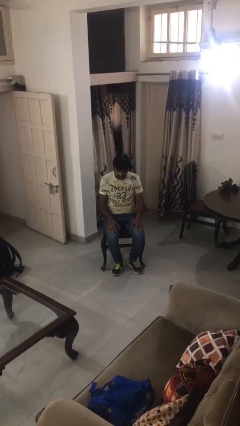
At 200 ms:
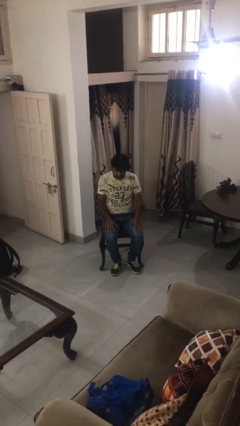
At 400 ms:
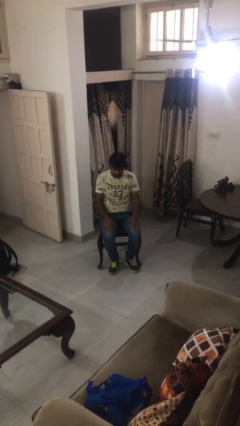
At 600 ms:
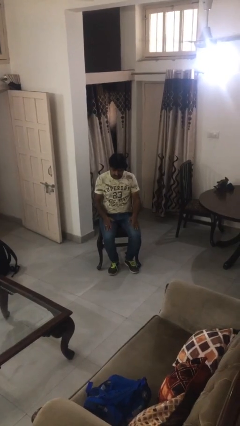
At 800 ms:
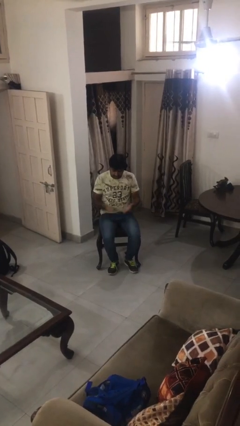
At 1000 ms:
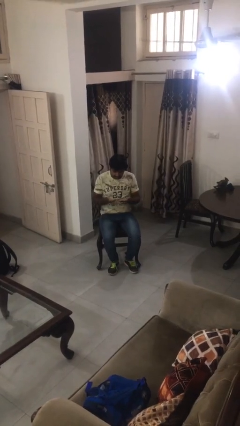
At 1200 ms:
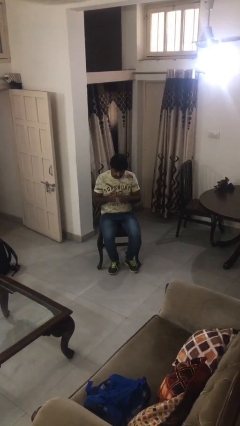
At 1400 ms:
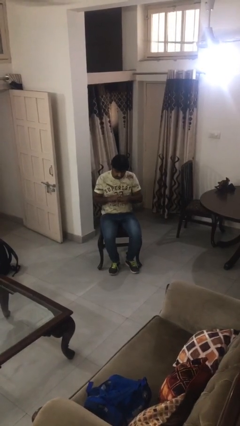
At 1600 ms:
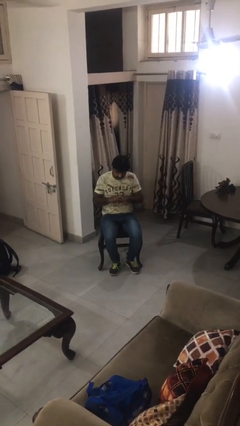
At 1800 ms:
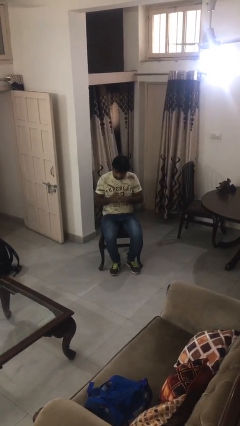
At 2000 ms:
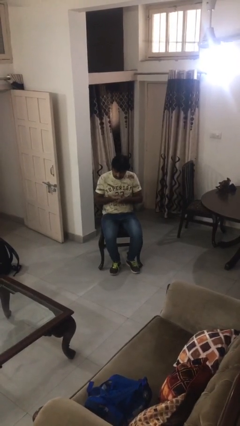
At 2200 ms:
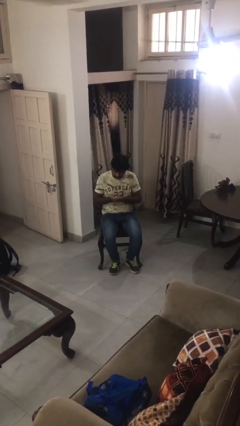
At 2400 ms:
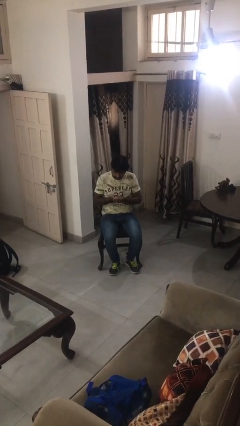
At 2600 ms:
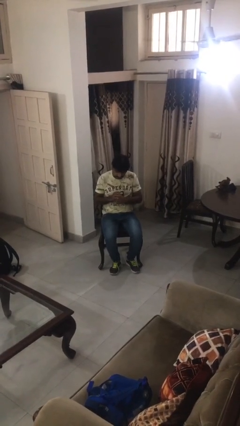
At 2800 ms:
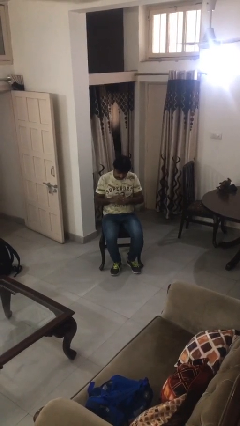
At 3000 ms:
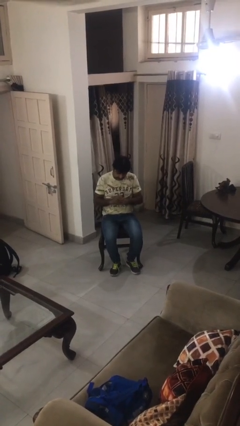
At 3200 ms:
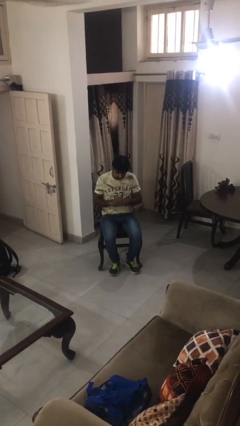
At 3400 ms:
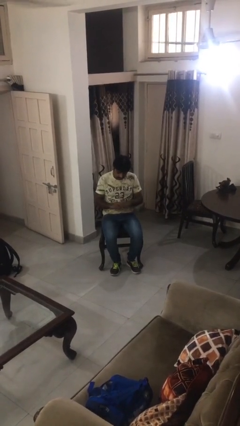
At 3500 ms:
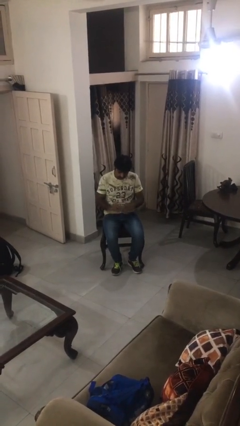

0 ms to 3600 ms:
person looks at hands in lap

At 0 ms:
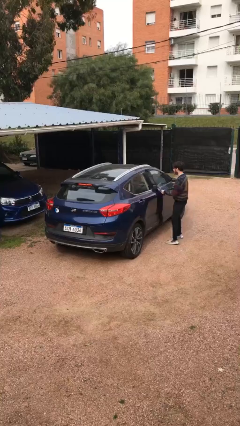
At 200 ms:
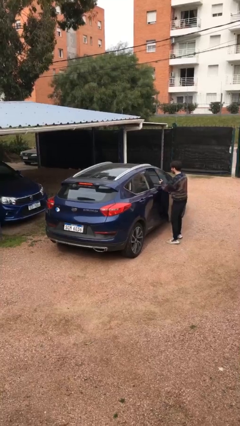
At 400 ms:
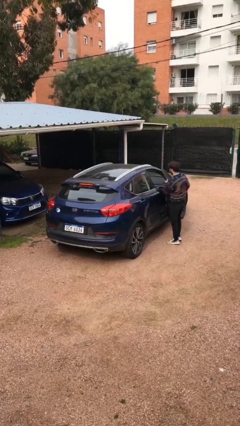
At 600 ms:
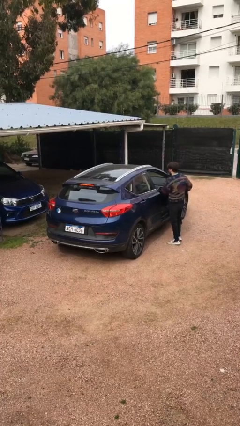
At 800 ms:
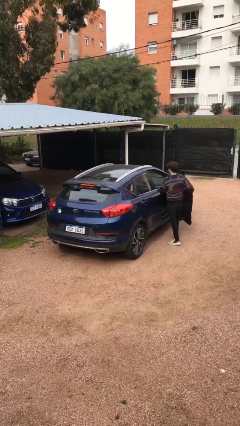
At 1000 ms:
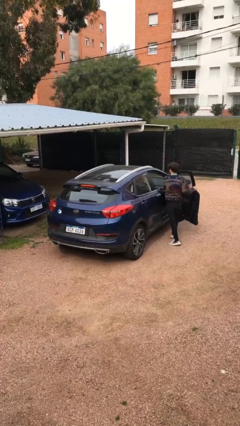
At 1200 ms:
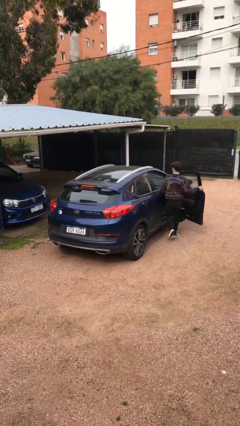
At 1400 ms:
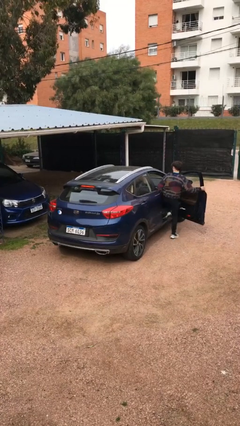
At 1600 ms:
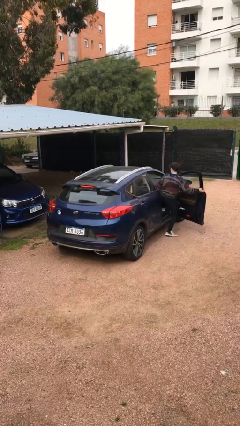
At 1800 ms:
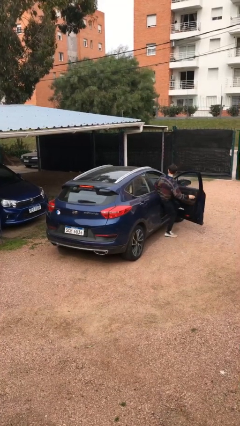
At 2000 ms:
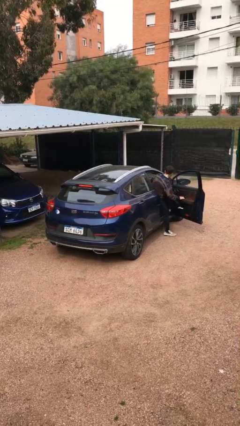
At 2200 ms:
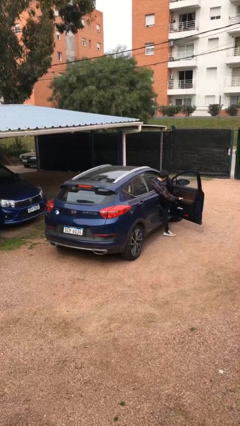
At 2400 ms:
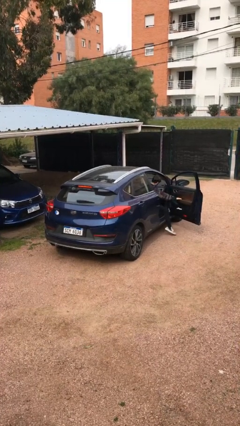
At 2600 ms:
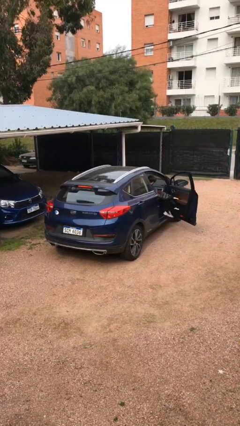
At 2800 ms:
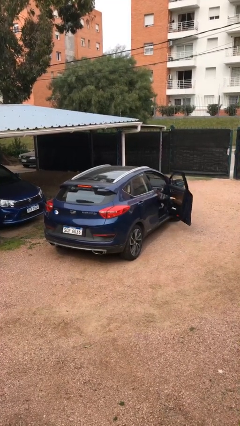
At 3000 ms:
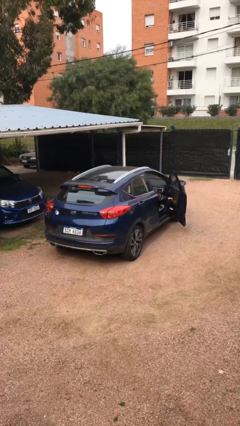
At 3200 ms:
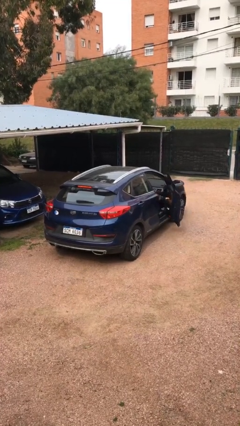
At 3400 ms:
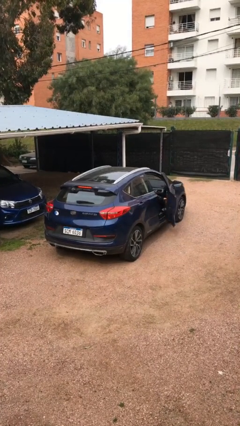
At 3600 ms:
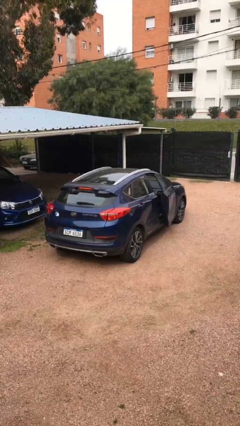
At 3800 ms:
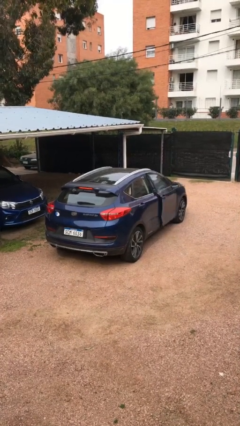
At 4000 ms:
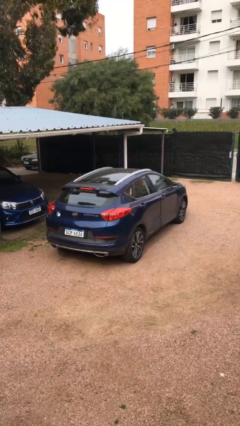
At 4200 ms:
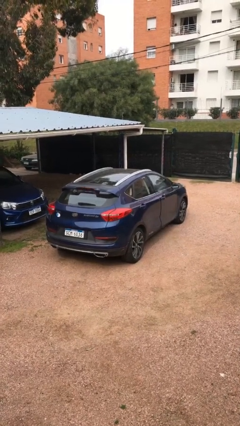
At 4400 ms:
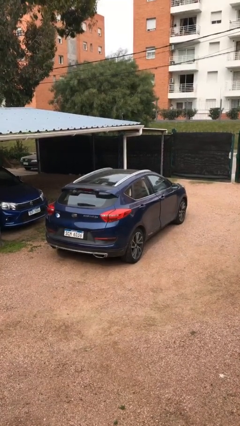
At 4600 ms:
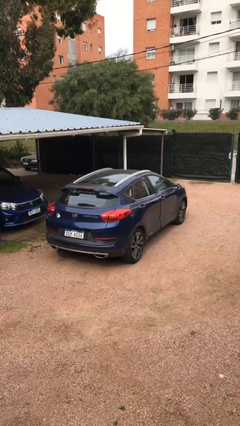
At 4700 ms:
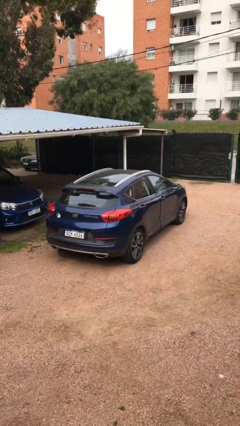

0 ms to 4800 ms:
car picks up person

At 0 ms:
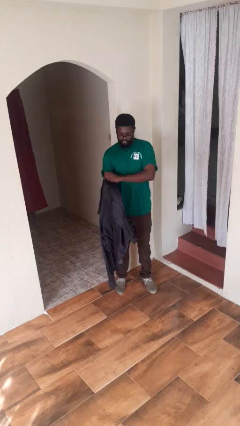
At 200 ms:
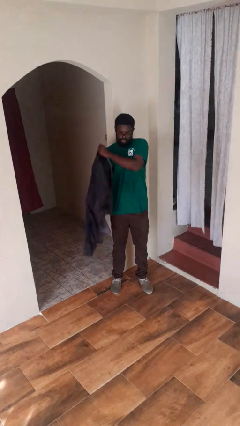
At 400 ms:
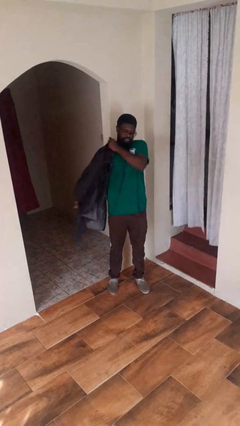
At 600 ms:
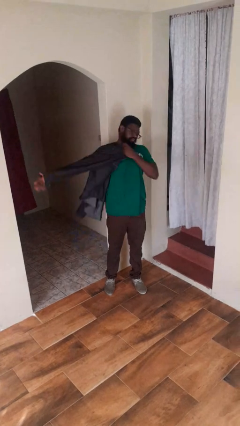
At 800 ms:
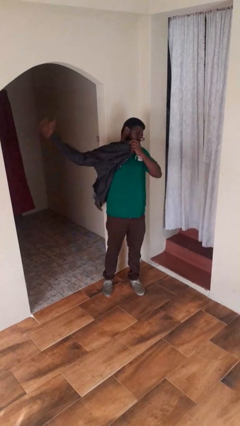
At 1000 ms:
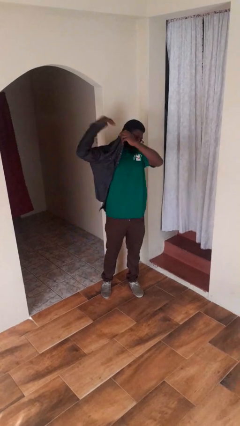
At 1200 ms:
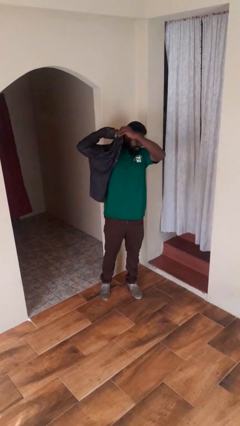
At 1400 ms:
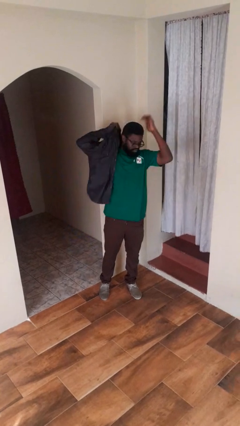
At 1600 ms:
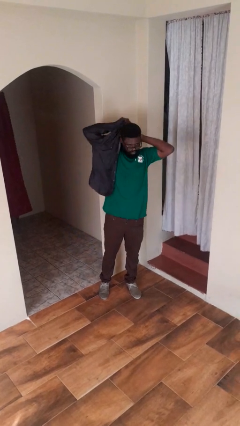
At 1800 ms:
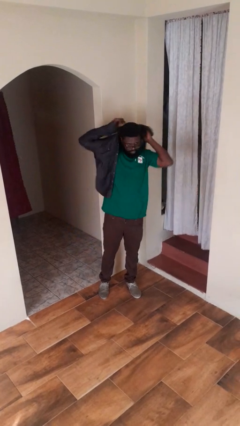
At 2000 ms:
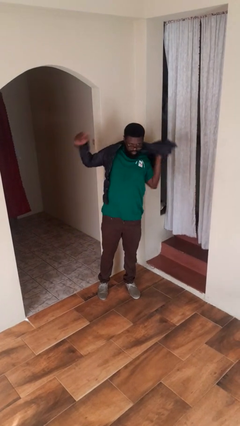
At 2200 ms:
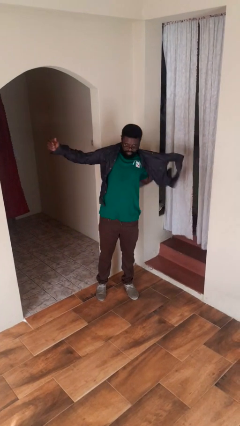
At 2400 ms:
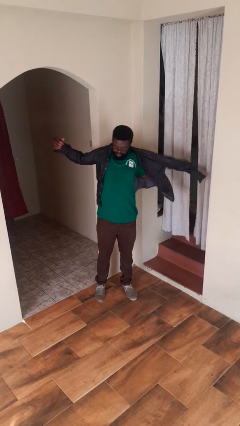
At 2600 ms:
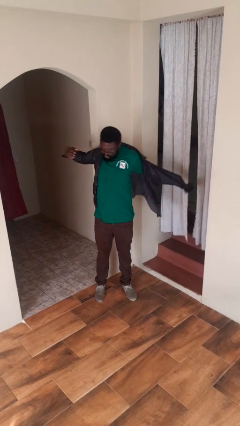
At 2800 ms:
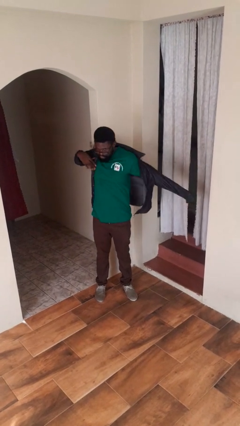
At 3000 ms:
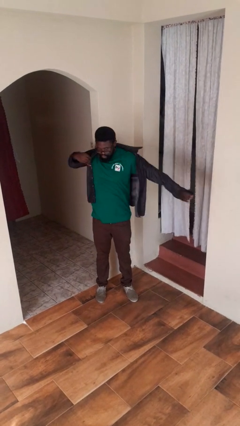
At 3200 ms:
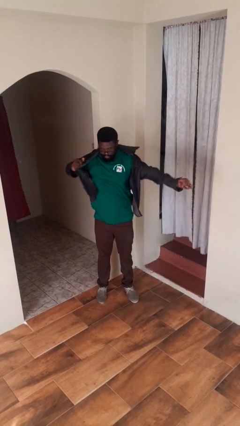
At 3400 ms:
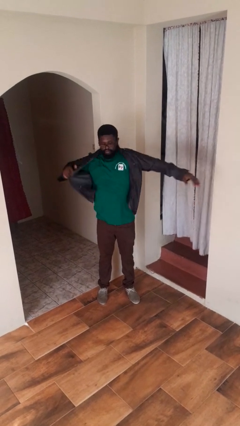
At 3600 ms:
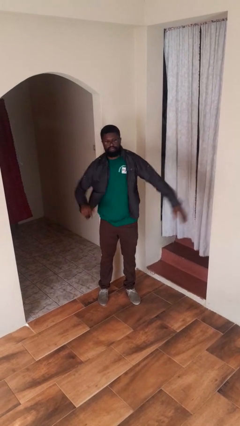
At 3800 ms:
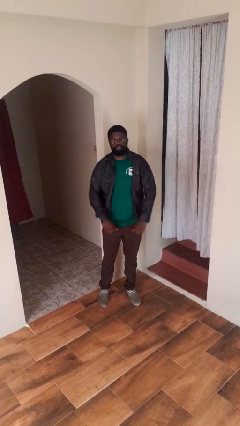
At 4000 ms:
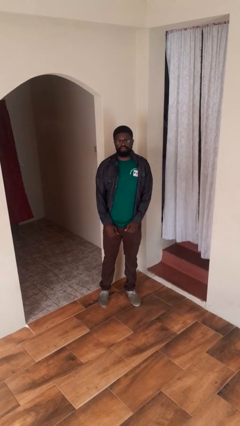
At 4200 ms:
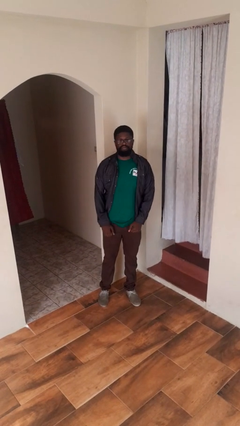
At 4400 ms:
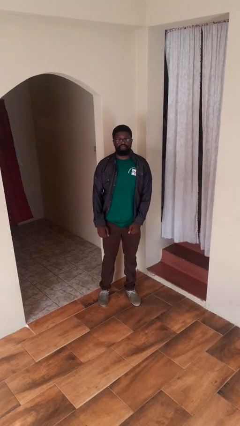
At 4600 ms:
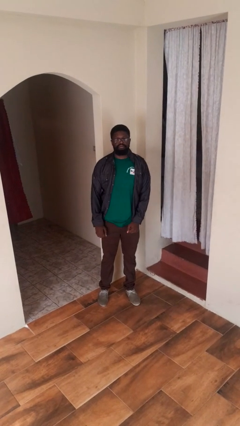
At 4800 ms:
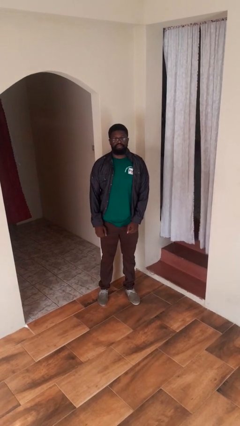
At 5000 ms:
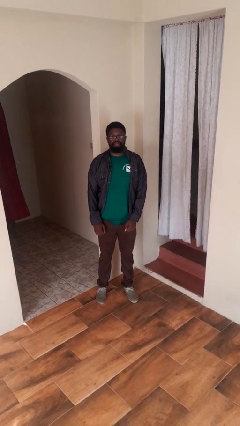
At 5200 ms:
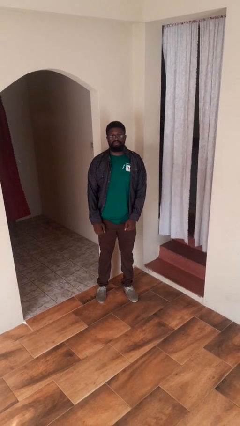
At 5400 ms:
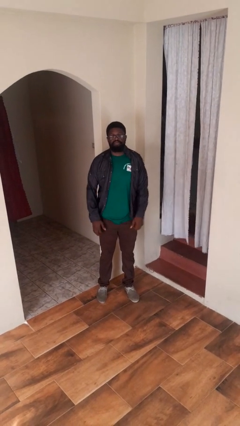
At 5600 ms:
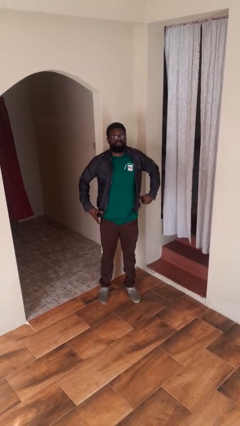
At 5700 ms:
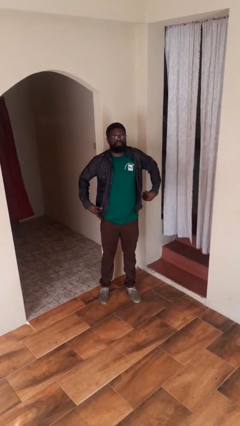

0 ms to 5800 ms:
person puts on shirt

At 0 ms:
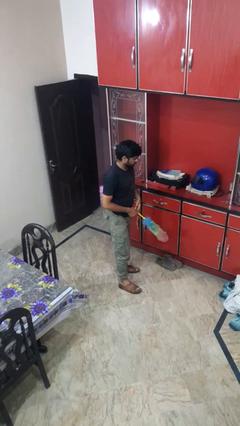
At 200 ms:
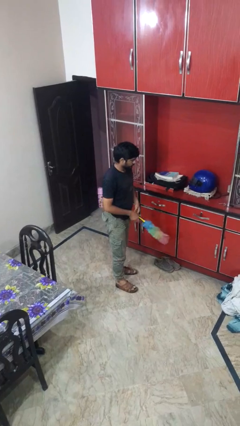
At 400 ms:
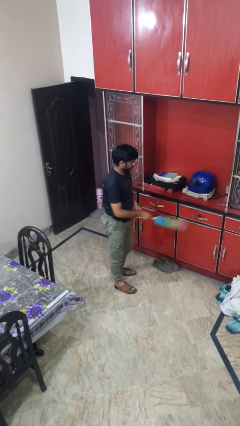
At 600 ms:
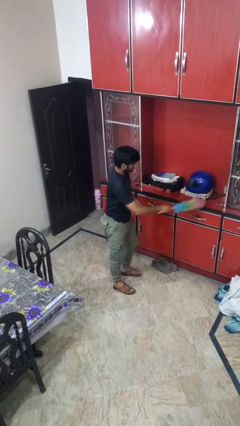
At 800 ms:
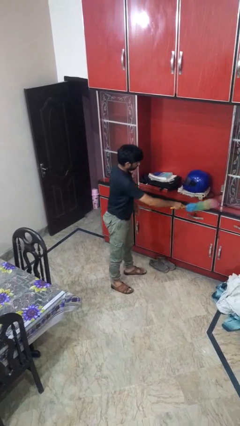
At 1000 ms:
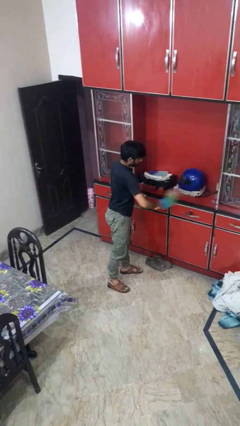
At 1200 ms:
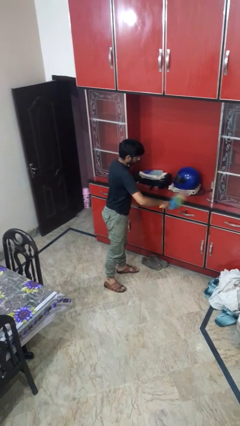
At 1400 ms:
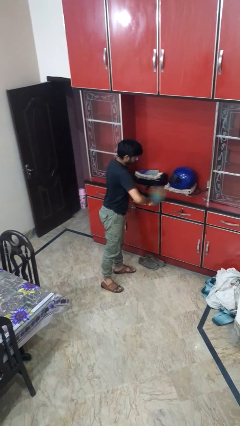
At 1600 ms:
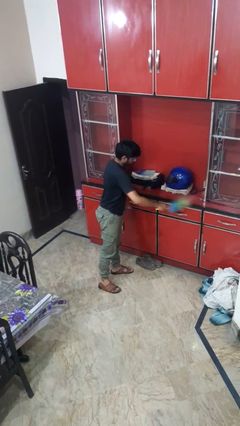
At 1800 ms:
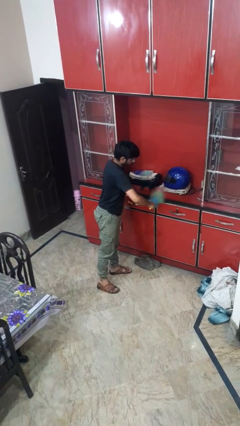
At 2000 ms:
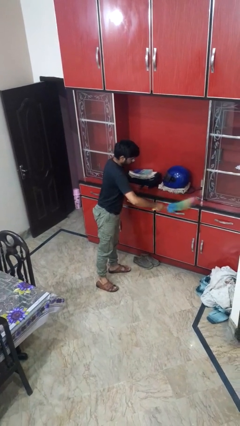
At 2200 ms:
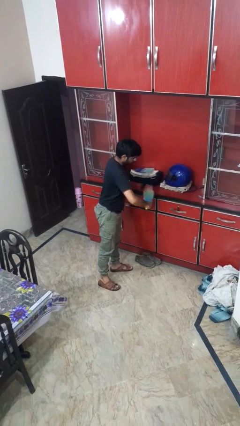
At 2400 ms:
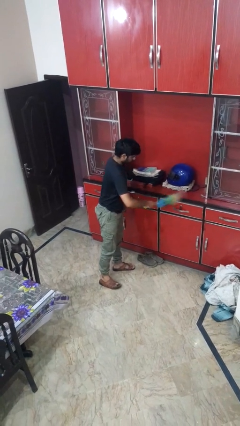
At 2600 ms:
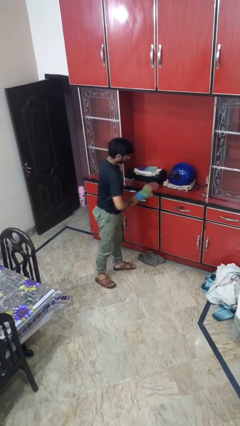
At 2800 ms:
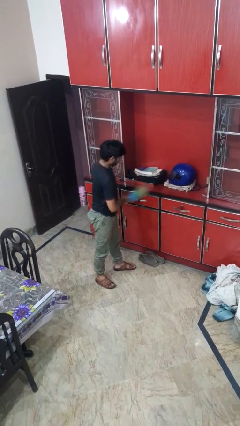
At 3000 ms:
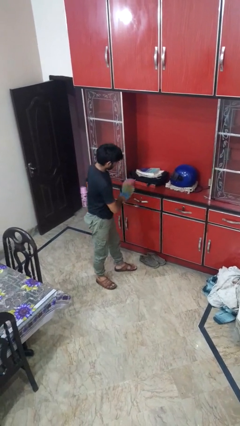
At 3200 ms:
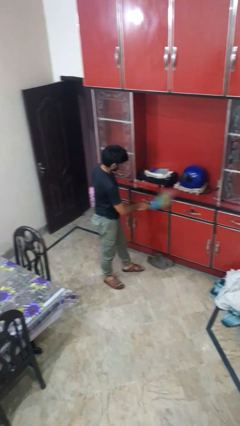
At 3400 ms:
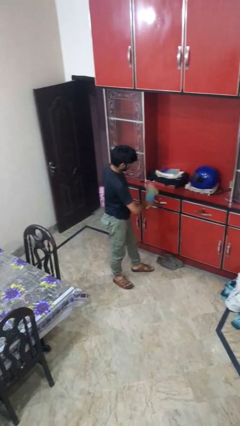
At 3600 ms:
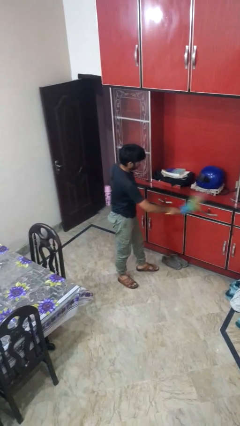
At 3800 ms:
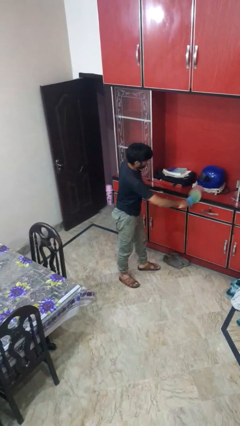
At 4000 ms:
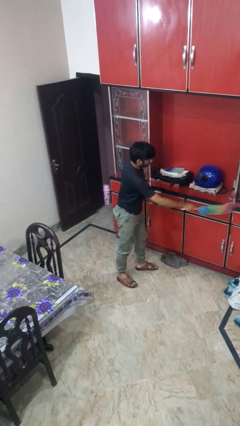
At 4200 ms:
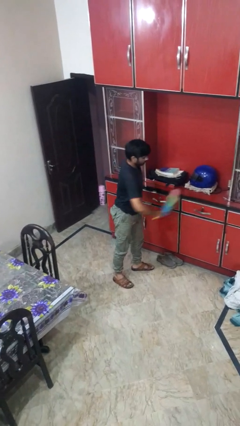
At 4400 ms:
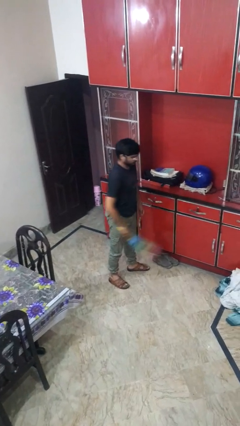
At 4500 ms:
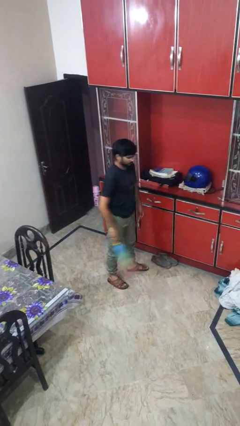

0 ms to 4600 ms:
person dusts furniture
